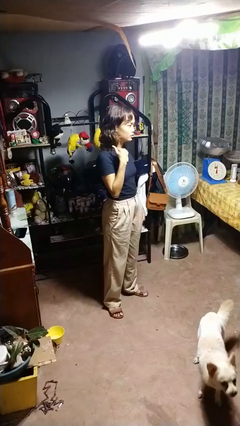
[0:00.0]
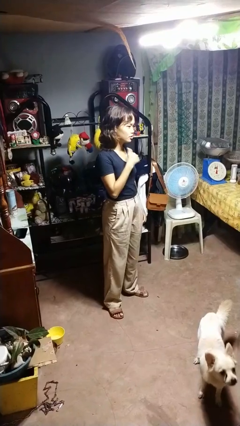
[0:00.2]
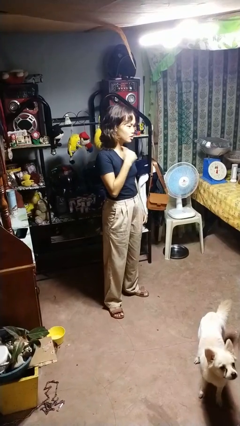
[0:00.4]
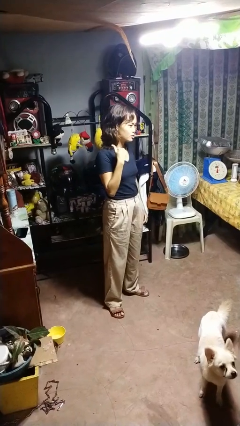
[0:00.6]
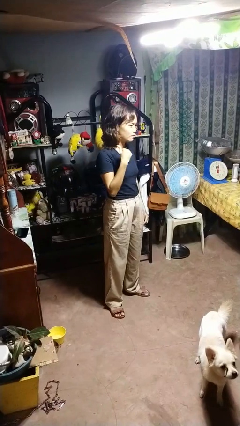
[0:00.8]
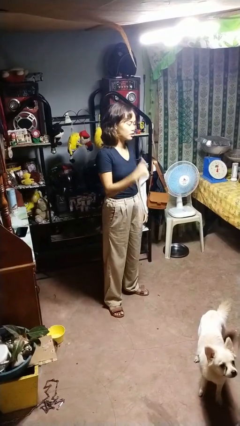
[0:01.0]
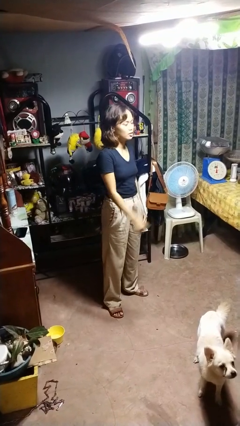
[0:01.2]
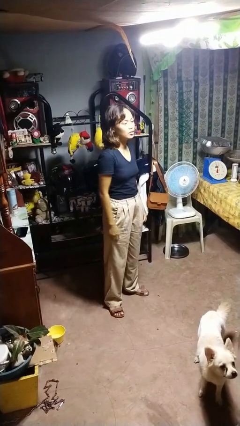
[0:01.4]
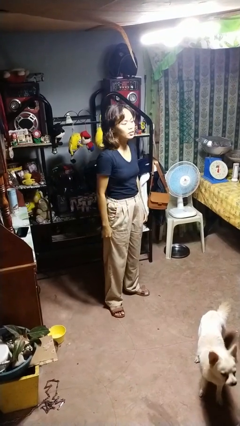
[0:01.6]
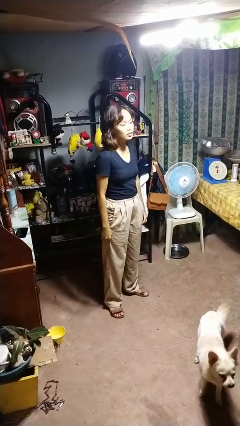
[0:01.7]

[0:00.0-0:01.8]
person gestures cut

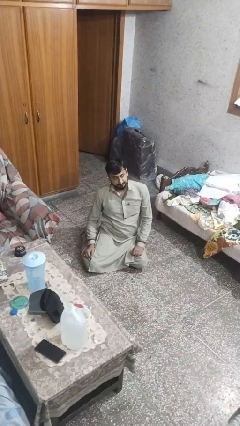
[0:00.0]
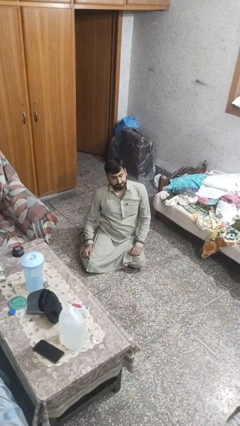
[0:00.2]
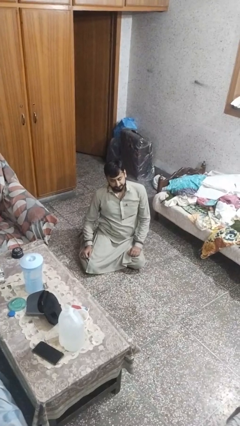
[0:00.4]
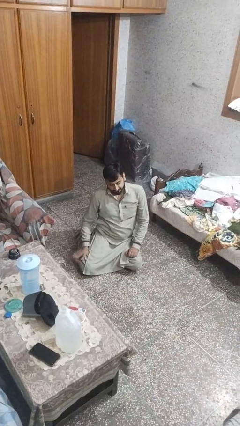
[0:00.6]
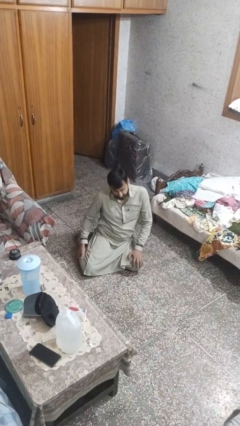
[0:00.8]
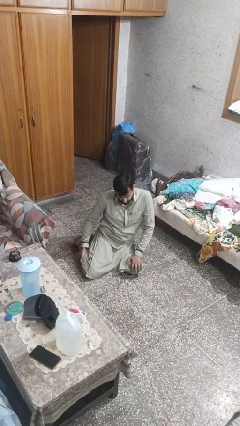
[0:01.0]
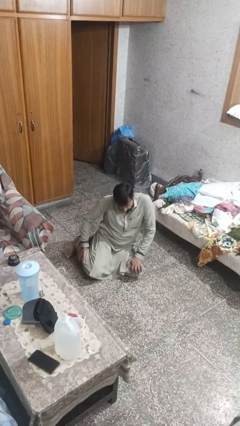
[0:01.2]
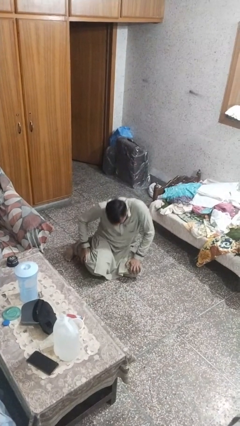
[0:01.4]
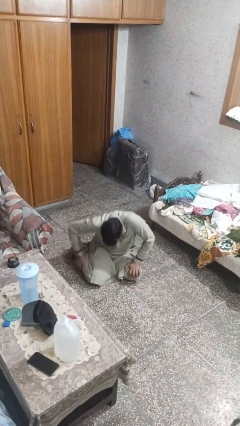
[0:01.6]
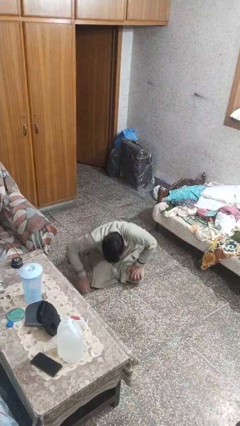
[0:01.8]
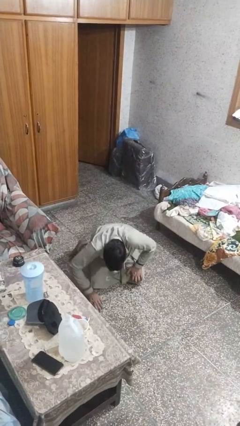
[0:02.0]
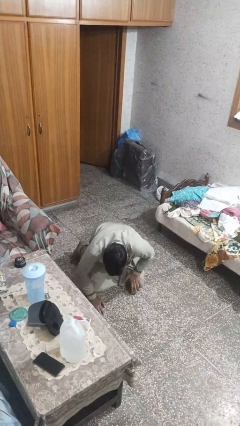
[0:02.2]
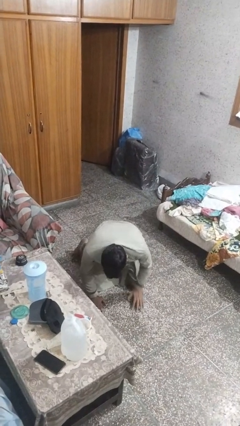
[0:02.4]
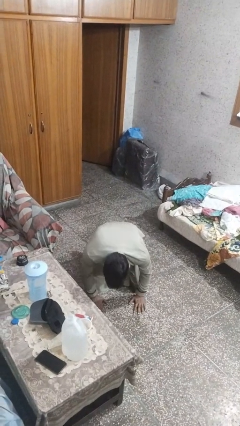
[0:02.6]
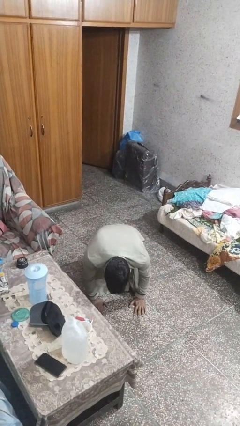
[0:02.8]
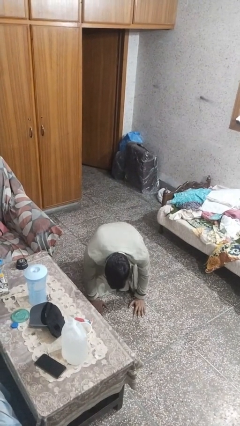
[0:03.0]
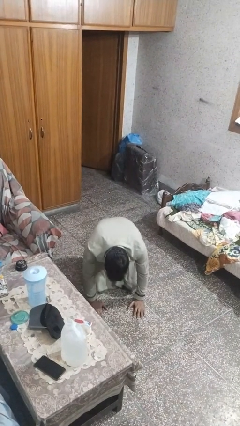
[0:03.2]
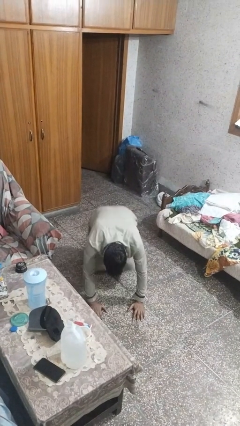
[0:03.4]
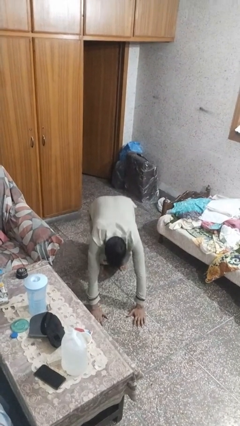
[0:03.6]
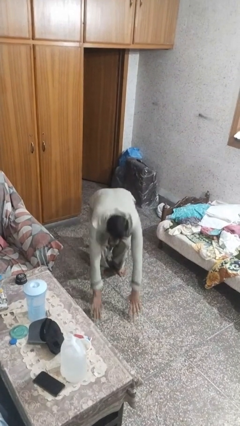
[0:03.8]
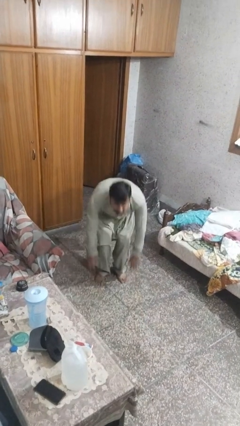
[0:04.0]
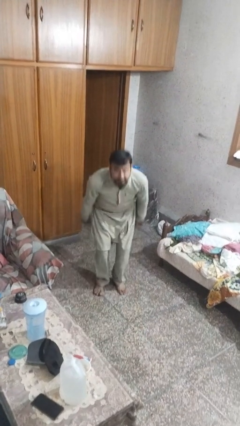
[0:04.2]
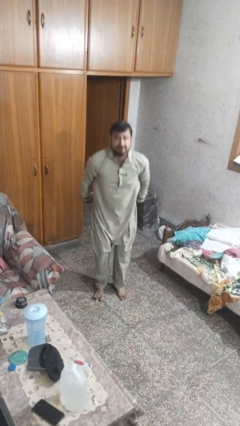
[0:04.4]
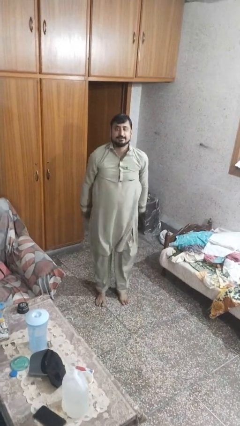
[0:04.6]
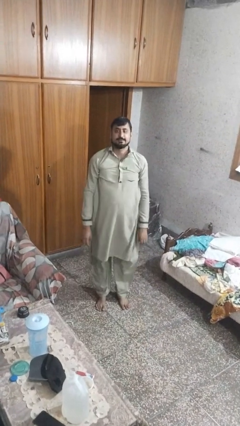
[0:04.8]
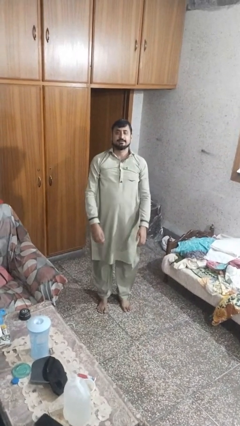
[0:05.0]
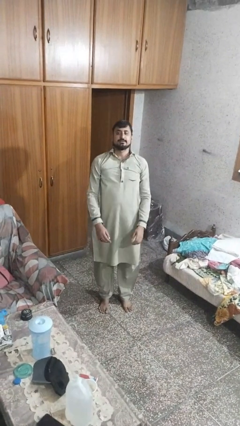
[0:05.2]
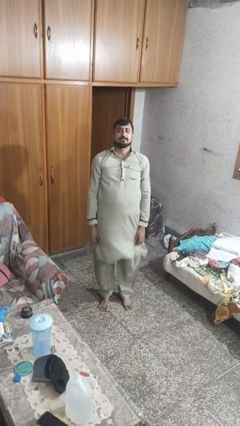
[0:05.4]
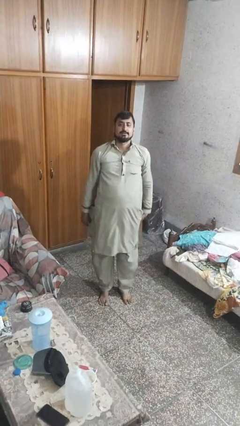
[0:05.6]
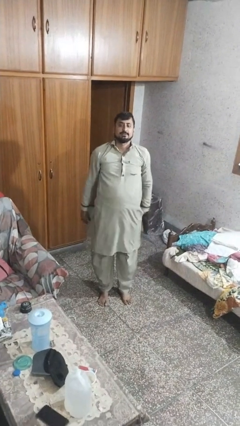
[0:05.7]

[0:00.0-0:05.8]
person stands up from floor

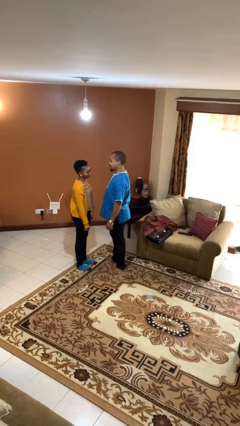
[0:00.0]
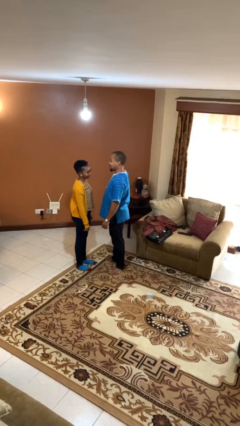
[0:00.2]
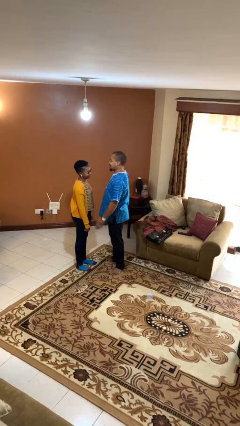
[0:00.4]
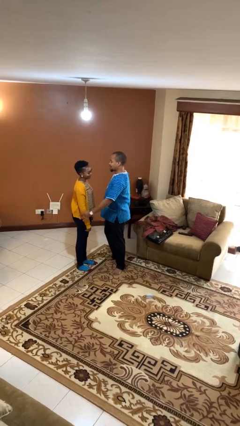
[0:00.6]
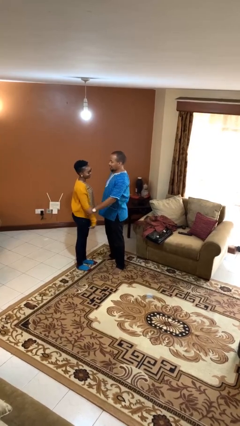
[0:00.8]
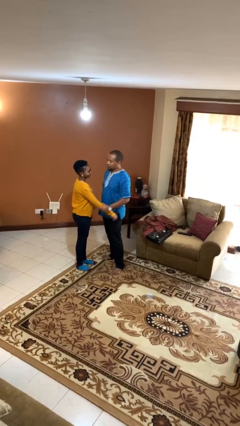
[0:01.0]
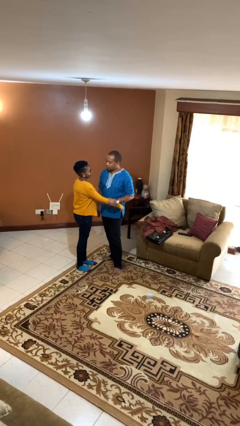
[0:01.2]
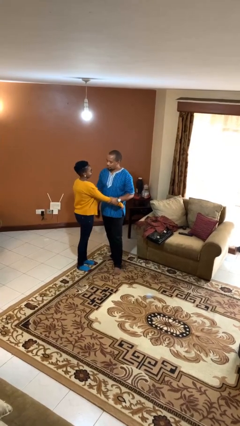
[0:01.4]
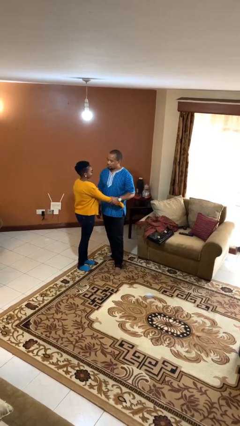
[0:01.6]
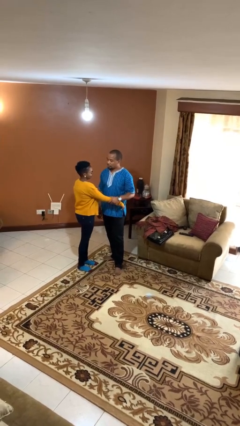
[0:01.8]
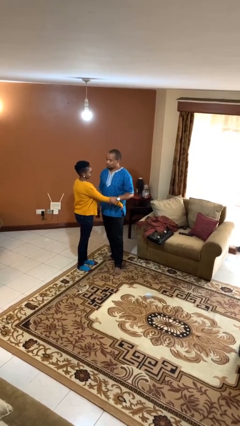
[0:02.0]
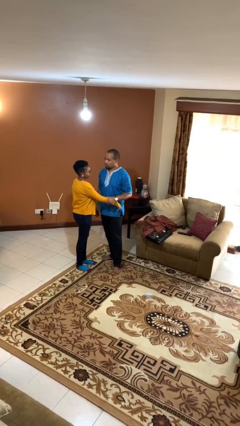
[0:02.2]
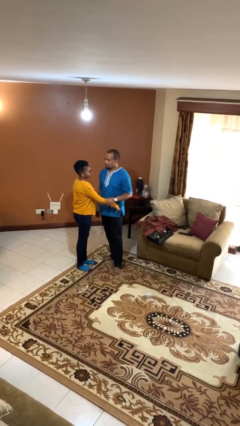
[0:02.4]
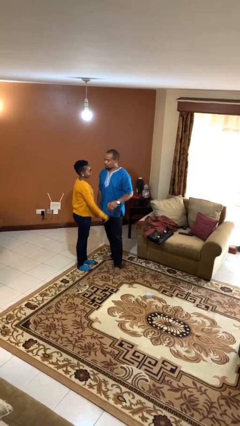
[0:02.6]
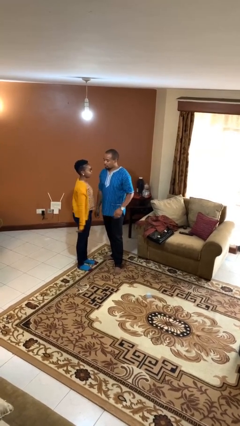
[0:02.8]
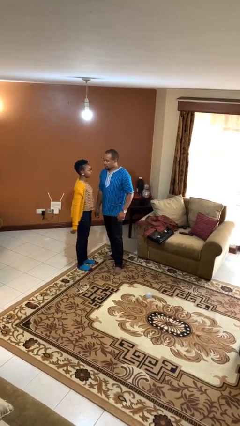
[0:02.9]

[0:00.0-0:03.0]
person grabs person by forearm

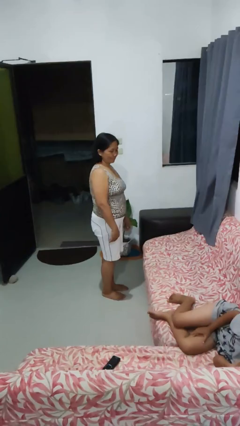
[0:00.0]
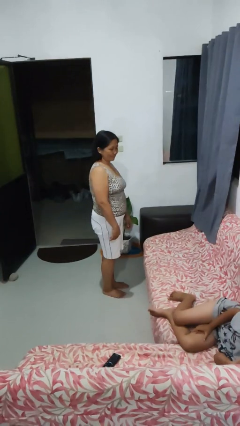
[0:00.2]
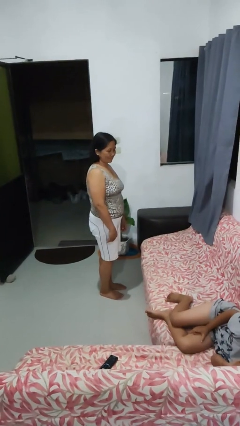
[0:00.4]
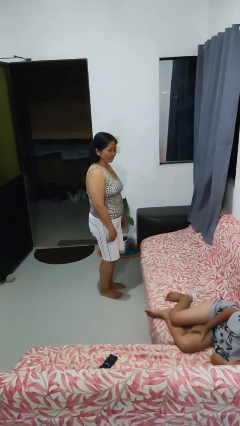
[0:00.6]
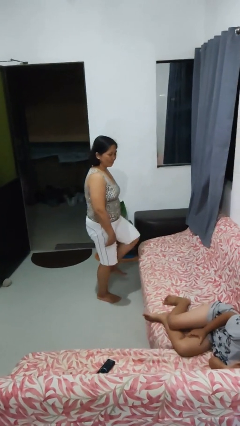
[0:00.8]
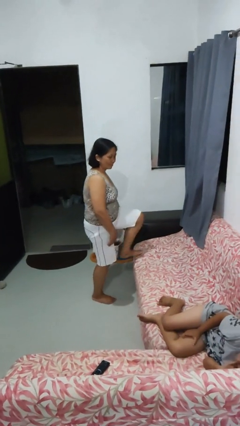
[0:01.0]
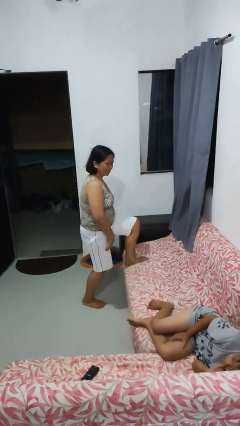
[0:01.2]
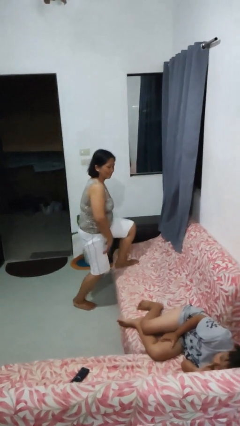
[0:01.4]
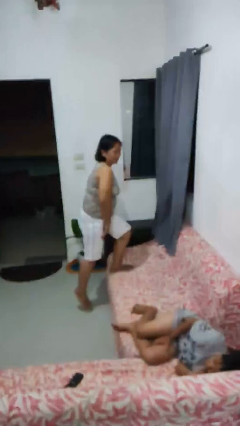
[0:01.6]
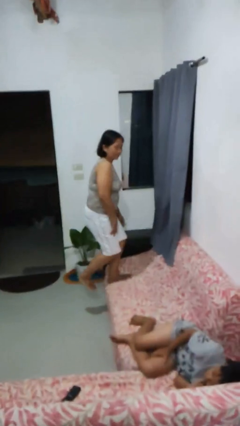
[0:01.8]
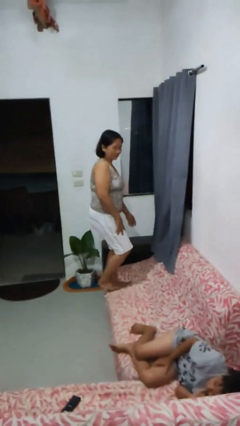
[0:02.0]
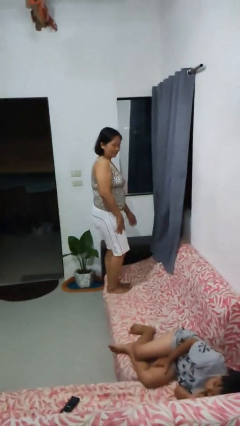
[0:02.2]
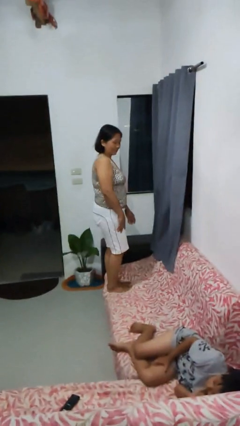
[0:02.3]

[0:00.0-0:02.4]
person climbs on couch

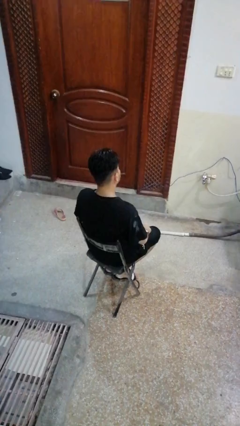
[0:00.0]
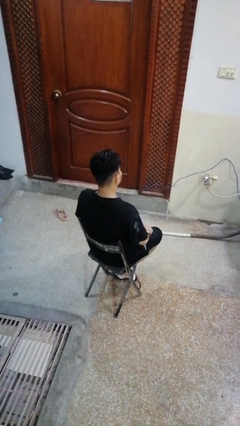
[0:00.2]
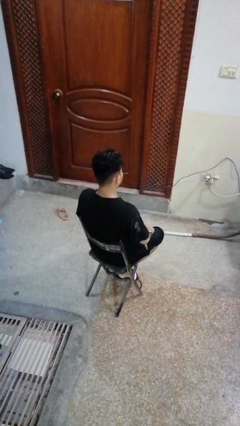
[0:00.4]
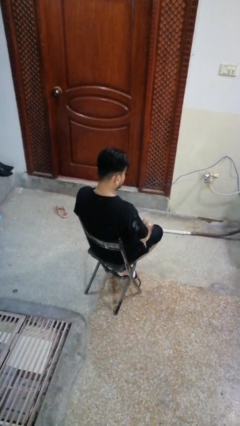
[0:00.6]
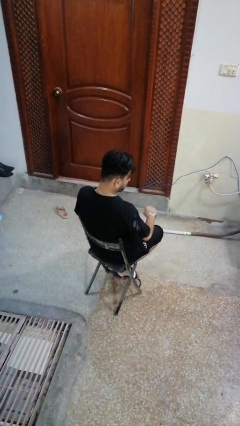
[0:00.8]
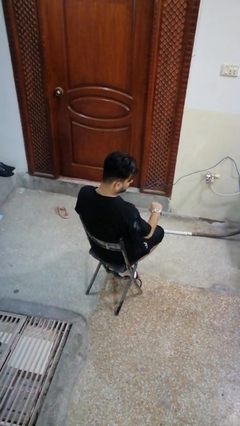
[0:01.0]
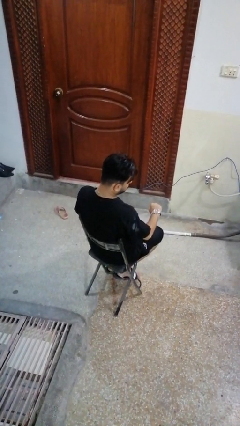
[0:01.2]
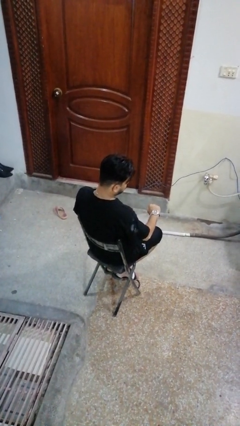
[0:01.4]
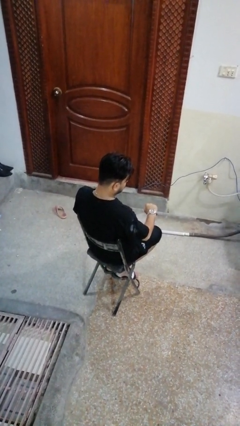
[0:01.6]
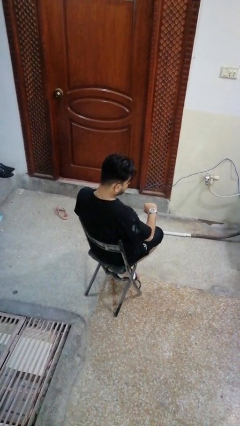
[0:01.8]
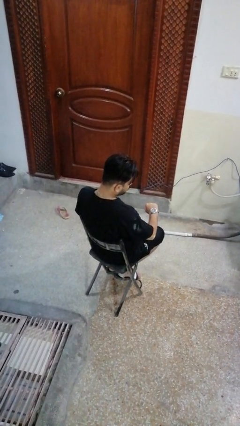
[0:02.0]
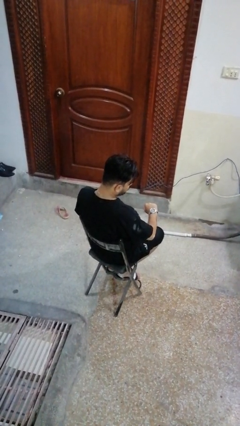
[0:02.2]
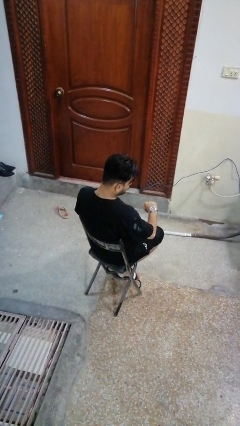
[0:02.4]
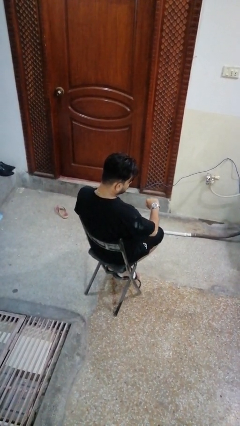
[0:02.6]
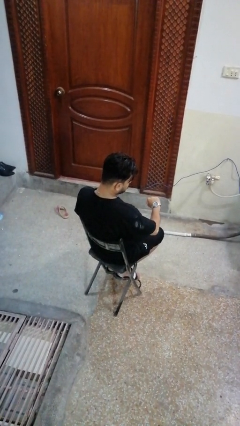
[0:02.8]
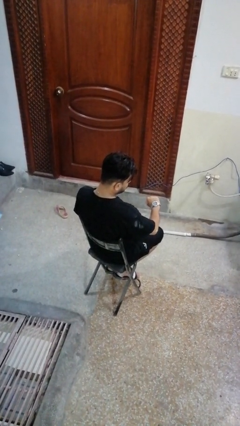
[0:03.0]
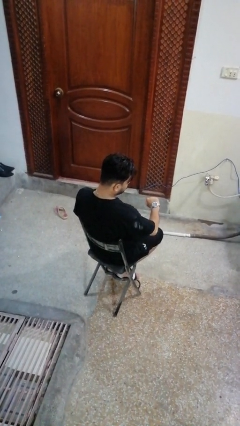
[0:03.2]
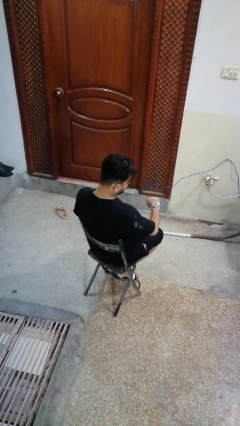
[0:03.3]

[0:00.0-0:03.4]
person looks at wristwatch

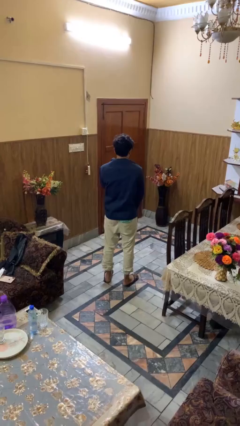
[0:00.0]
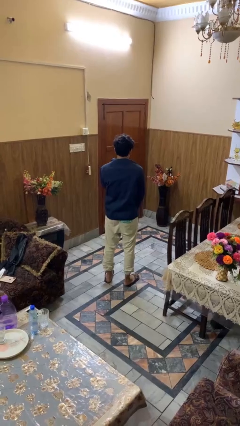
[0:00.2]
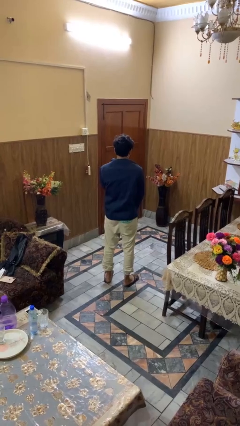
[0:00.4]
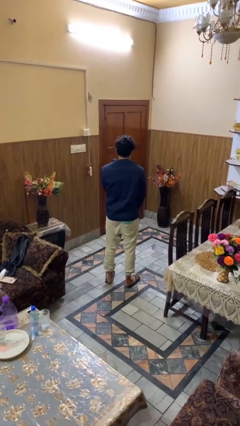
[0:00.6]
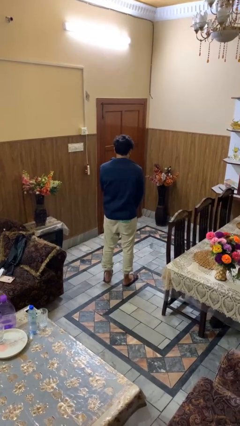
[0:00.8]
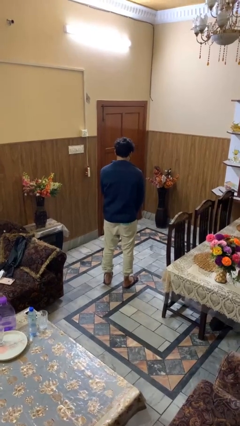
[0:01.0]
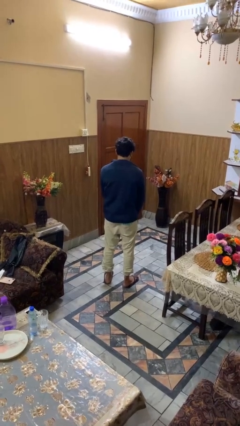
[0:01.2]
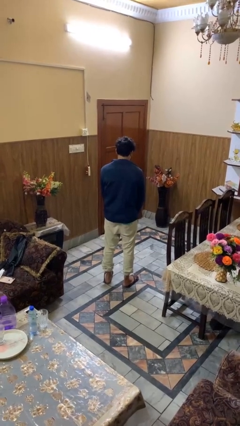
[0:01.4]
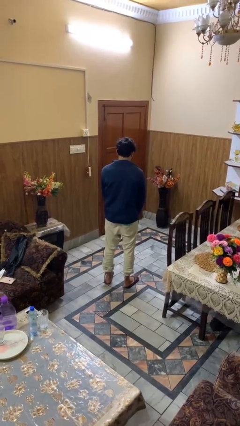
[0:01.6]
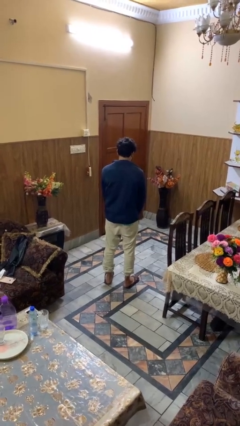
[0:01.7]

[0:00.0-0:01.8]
person unzips jacket
